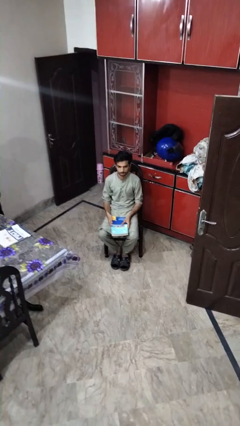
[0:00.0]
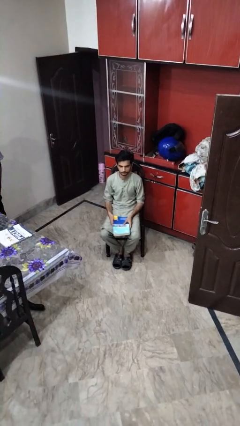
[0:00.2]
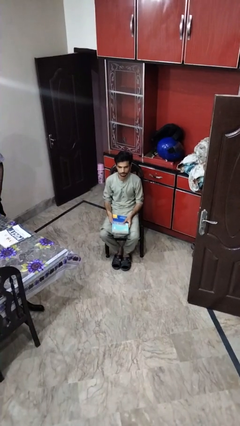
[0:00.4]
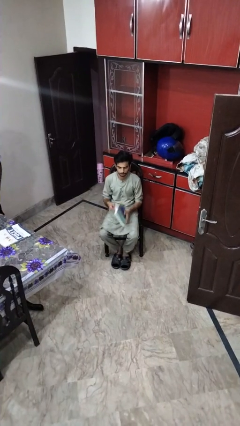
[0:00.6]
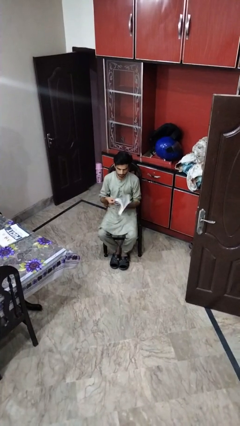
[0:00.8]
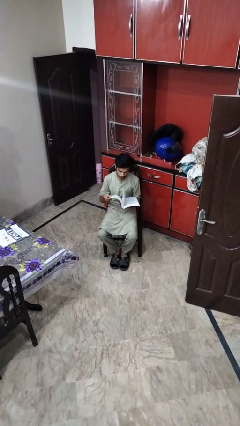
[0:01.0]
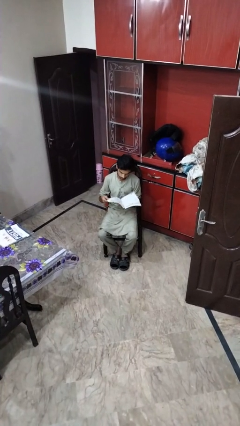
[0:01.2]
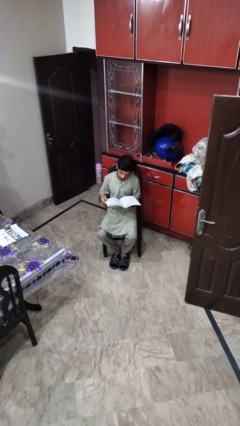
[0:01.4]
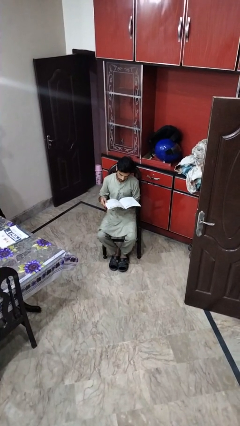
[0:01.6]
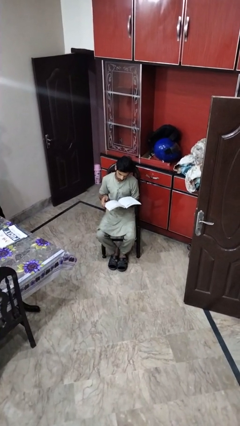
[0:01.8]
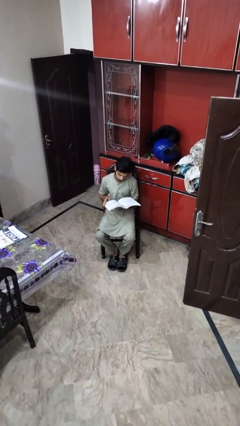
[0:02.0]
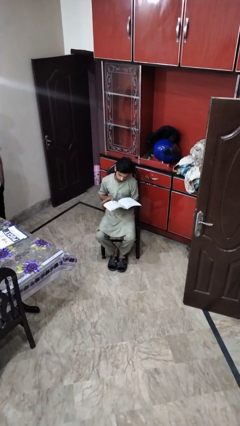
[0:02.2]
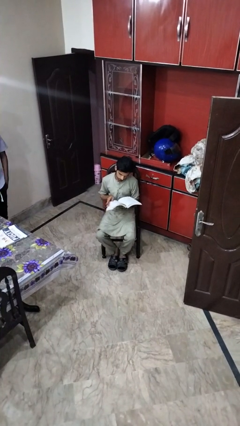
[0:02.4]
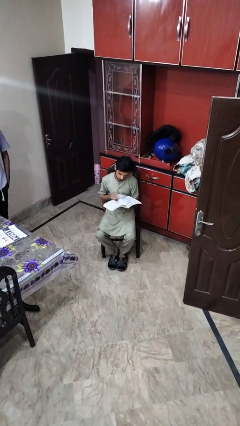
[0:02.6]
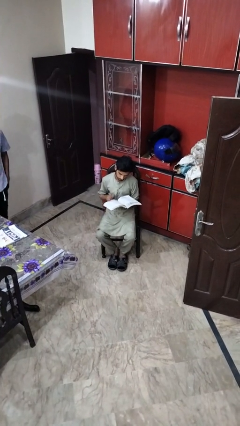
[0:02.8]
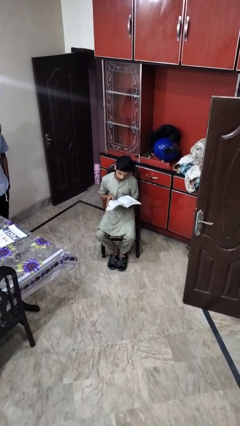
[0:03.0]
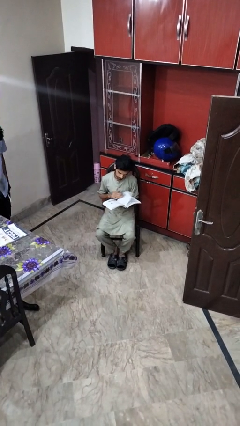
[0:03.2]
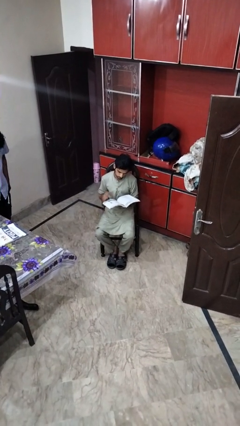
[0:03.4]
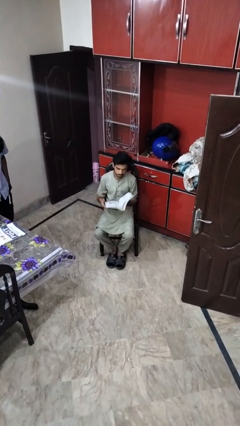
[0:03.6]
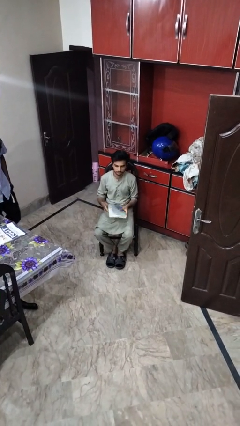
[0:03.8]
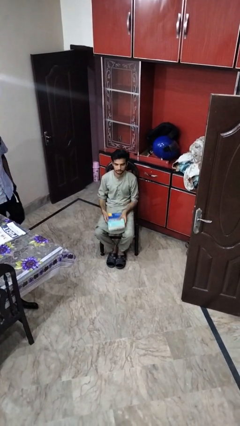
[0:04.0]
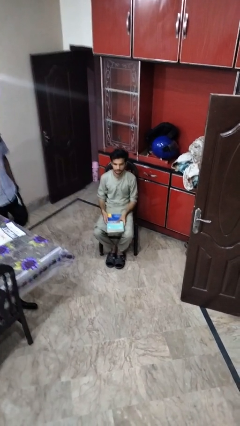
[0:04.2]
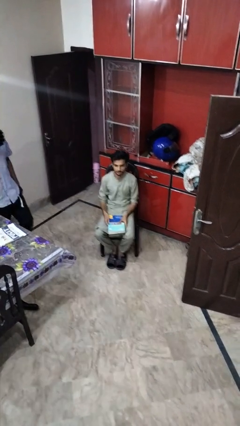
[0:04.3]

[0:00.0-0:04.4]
person reads book

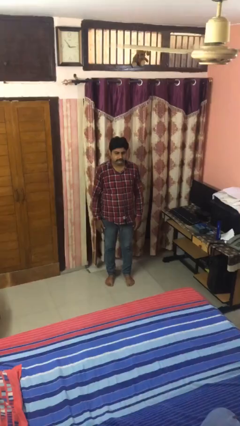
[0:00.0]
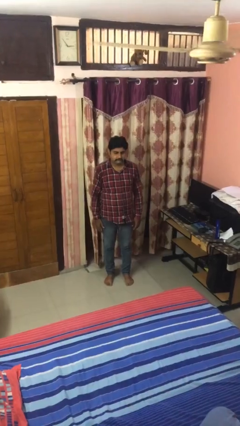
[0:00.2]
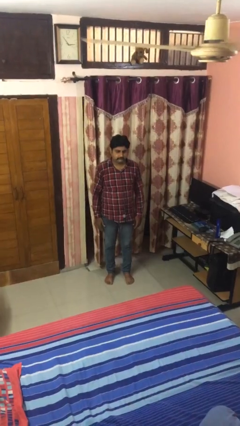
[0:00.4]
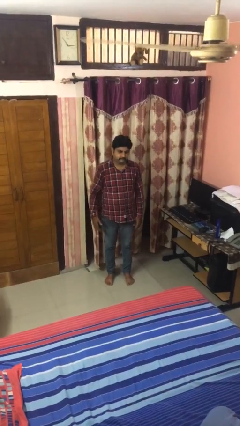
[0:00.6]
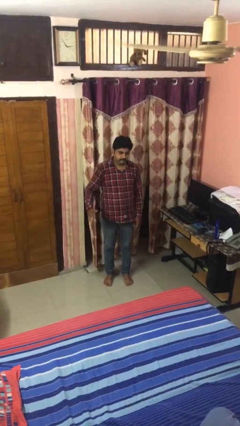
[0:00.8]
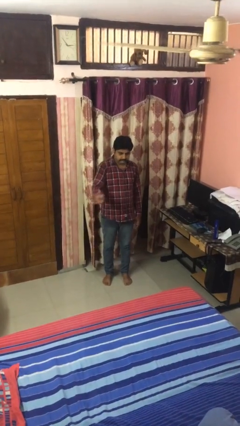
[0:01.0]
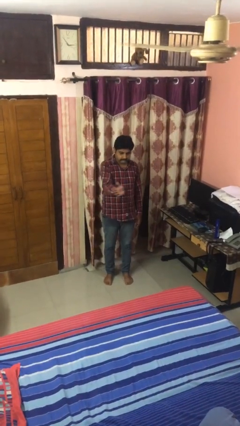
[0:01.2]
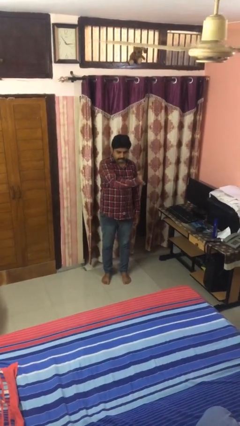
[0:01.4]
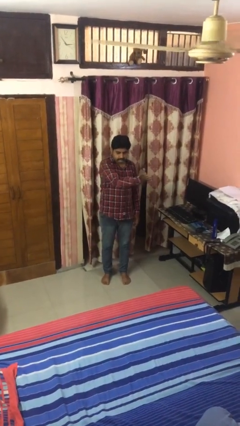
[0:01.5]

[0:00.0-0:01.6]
person gestures swipe left

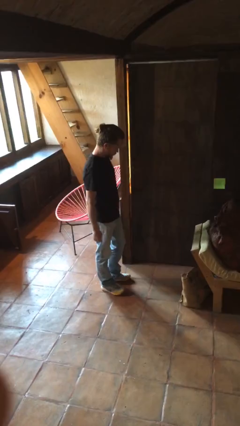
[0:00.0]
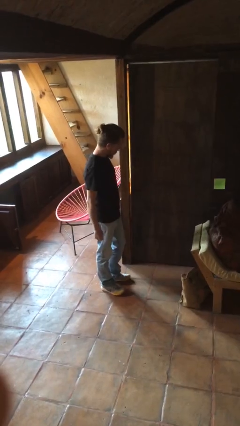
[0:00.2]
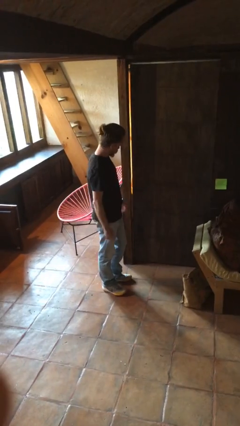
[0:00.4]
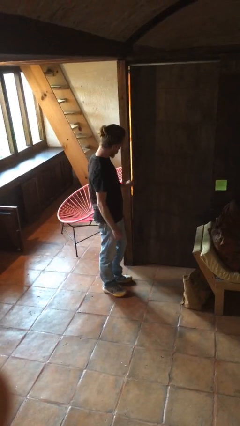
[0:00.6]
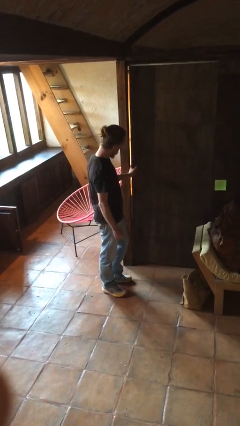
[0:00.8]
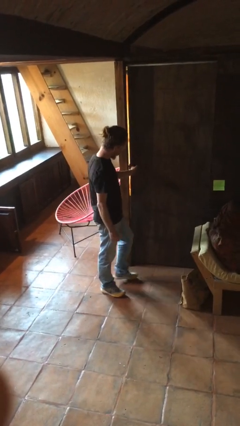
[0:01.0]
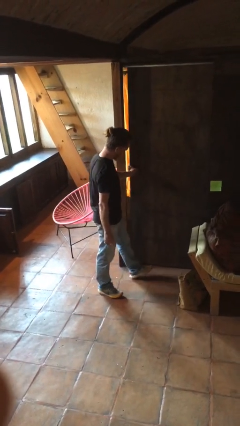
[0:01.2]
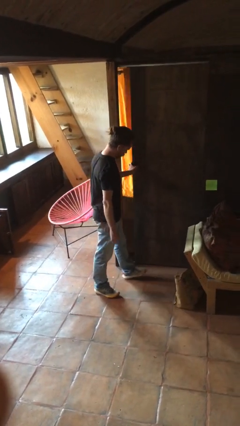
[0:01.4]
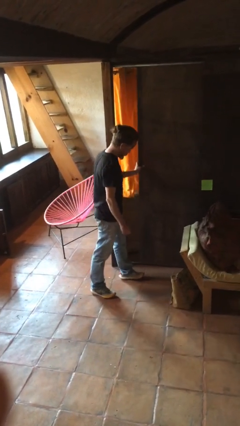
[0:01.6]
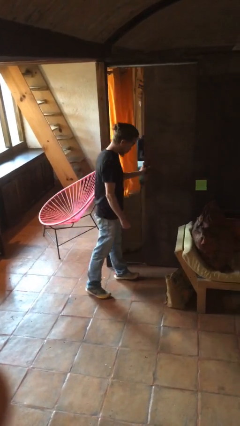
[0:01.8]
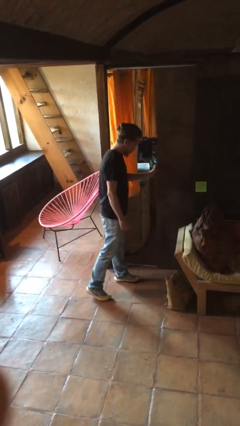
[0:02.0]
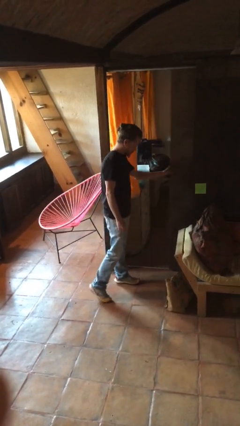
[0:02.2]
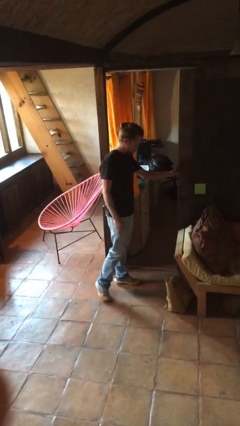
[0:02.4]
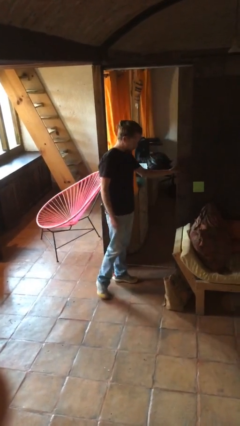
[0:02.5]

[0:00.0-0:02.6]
person opens sliding door

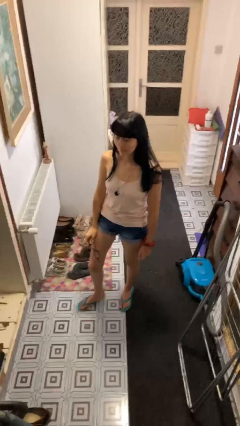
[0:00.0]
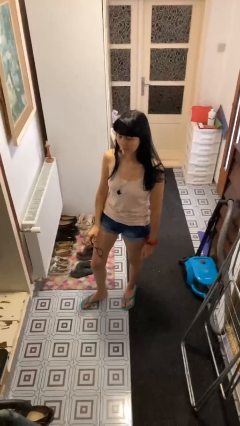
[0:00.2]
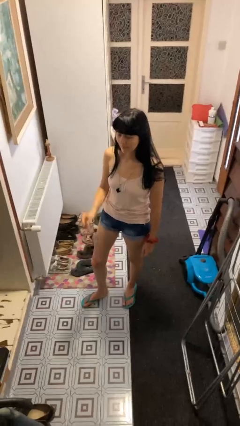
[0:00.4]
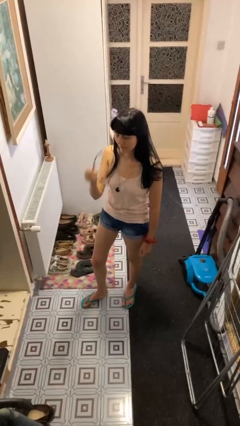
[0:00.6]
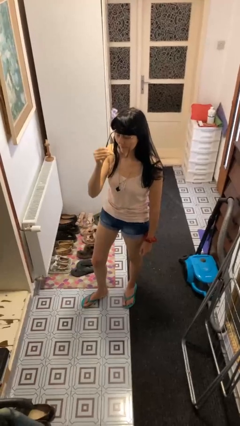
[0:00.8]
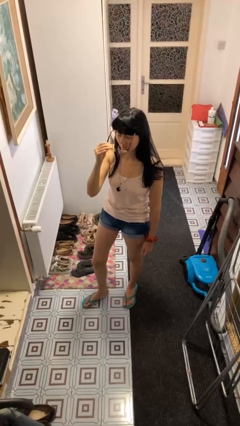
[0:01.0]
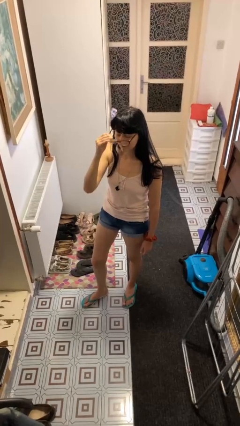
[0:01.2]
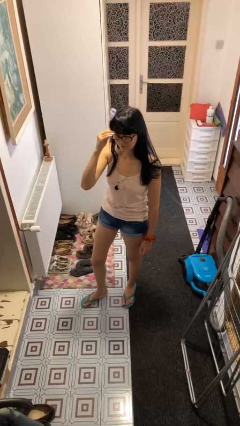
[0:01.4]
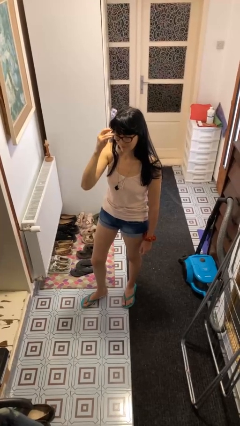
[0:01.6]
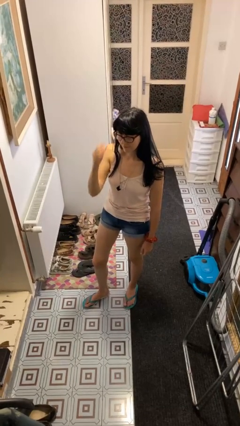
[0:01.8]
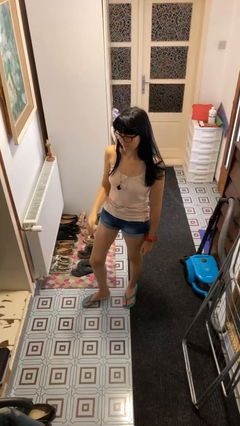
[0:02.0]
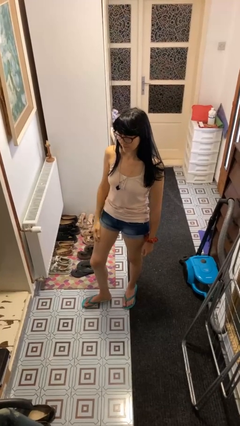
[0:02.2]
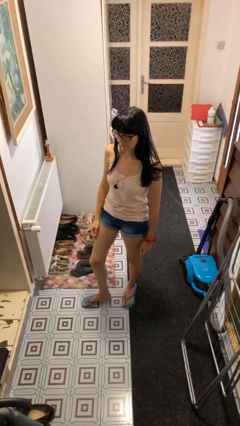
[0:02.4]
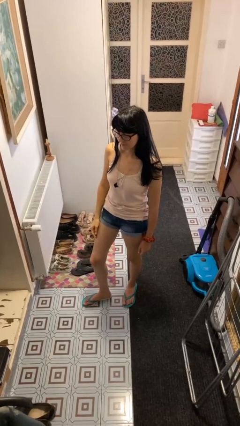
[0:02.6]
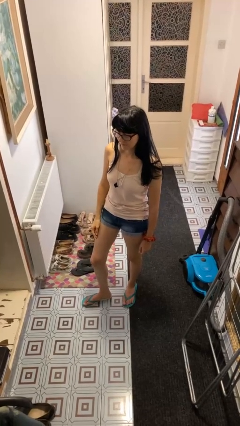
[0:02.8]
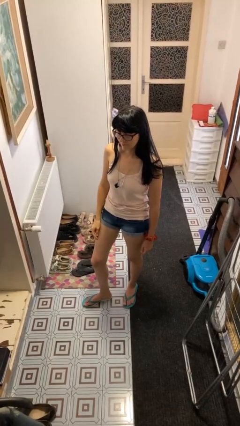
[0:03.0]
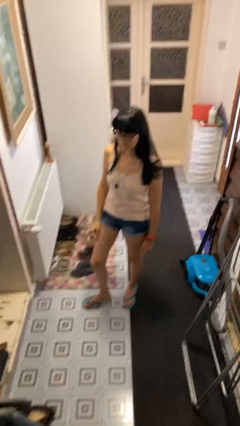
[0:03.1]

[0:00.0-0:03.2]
person puts on glasses

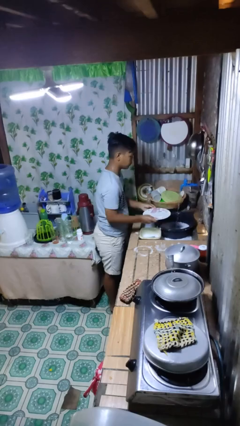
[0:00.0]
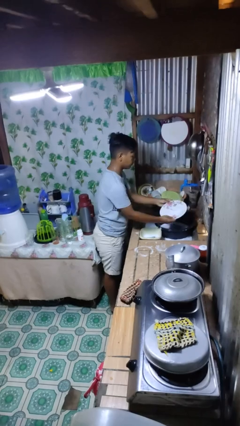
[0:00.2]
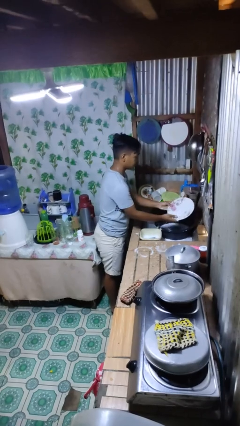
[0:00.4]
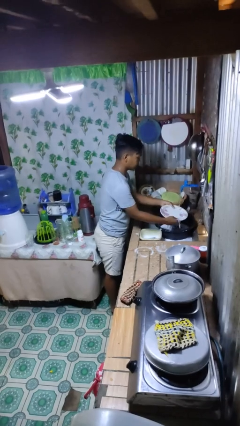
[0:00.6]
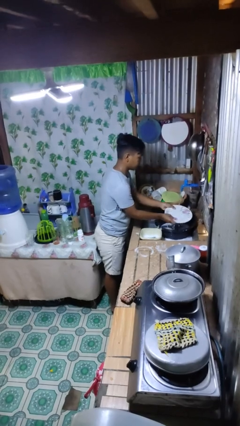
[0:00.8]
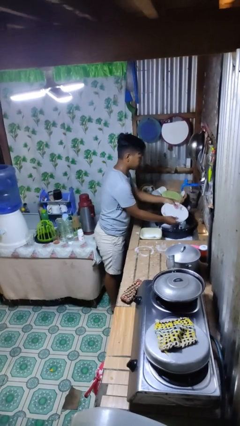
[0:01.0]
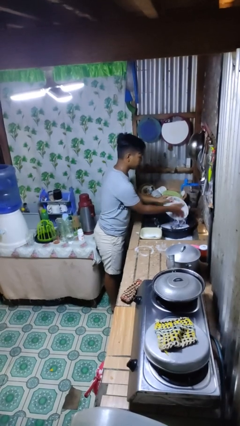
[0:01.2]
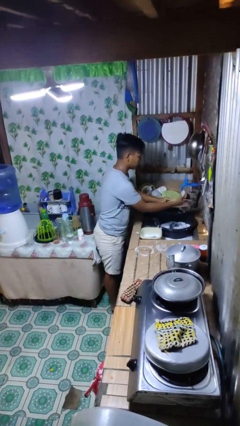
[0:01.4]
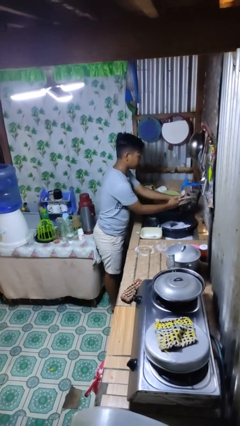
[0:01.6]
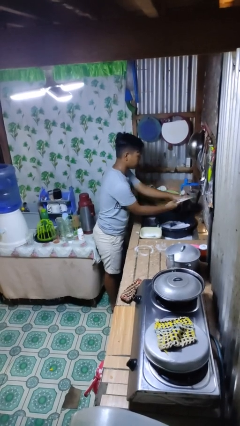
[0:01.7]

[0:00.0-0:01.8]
person washes dish

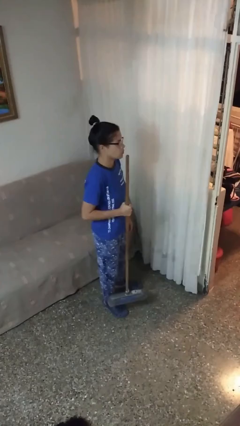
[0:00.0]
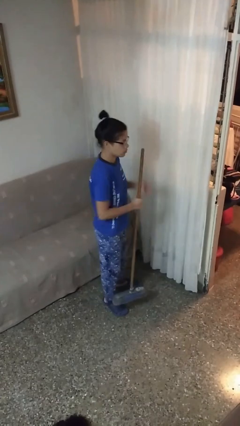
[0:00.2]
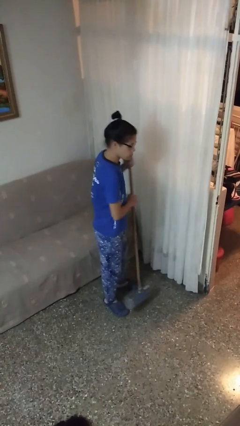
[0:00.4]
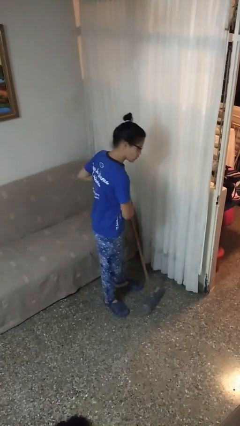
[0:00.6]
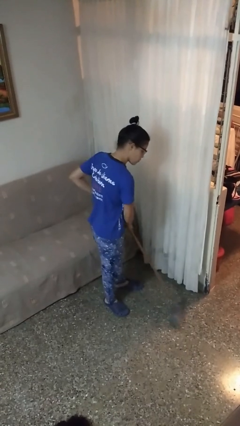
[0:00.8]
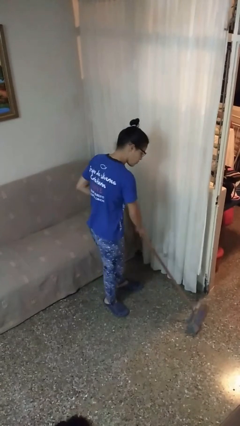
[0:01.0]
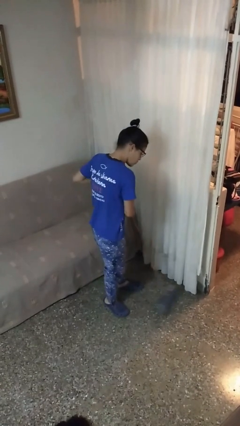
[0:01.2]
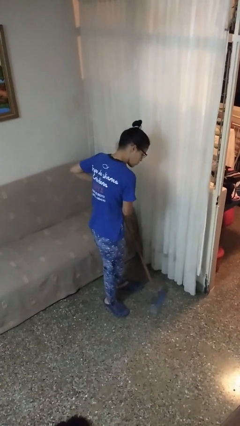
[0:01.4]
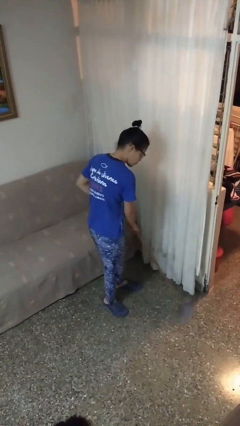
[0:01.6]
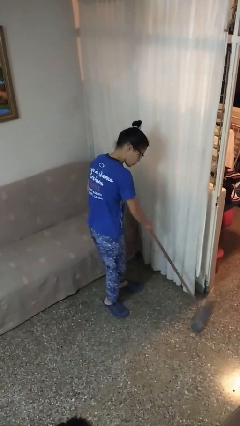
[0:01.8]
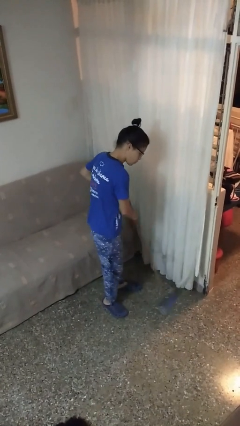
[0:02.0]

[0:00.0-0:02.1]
person sweeps floor

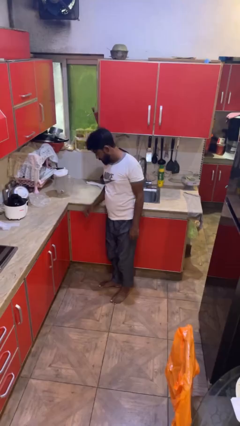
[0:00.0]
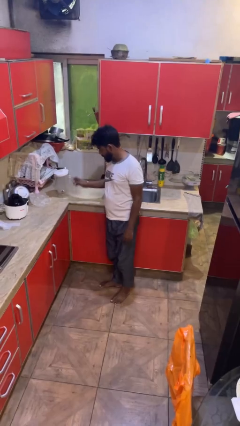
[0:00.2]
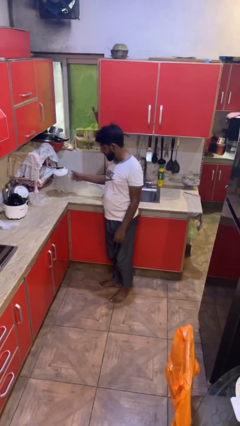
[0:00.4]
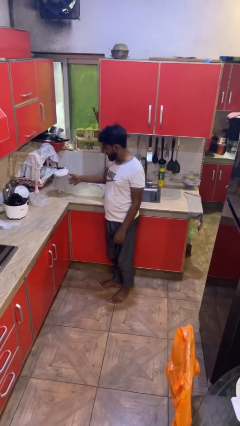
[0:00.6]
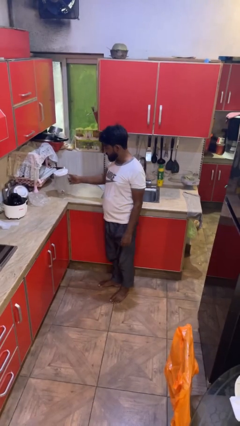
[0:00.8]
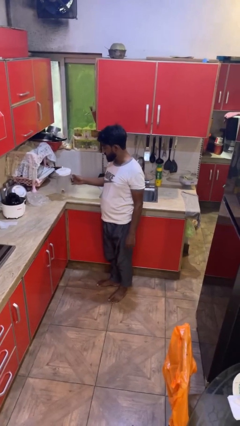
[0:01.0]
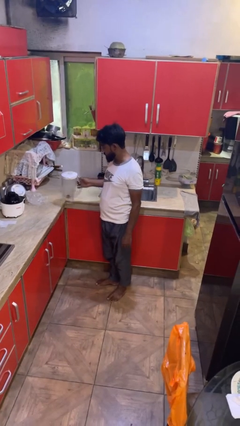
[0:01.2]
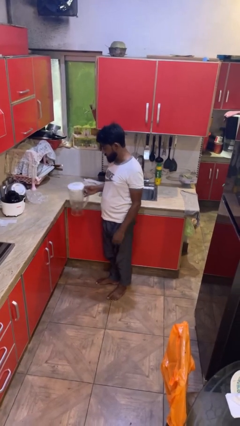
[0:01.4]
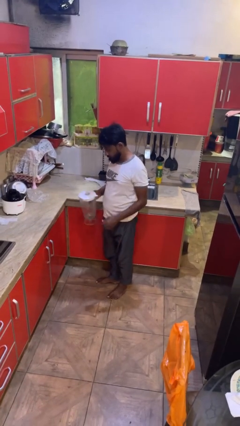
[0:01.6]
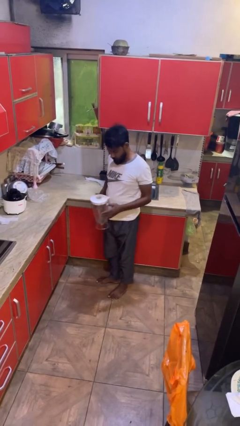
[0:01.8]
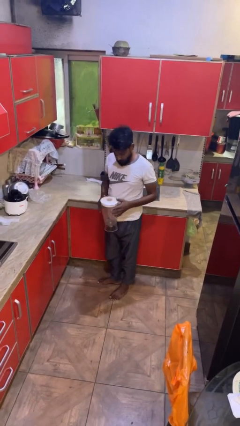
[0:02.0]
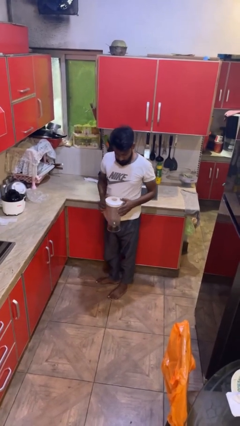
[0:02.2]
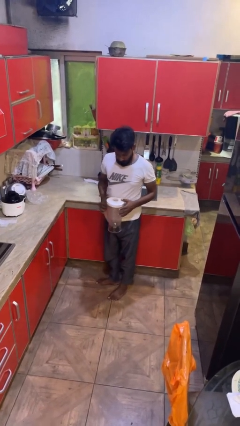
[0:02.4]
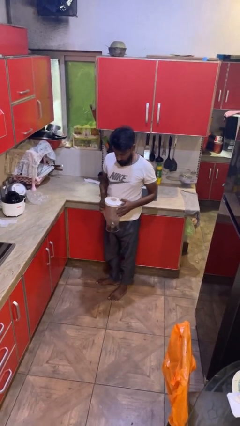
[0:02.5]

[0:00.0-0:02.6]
person picks up object from countertop
